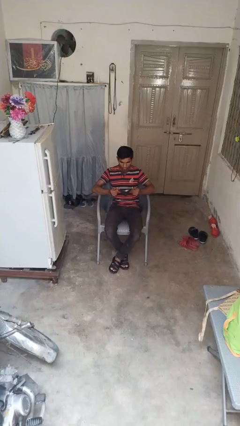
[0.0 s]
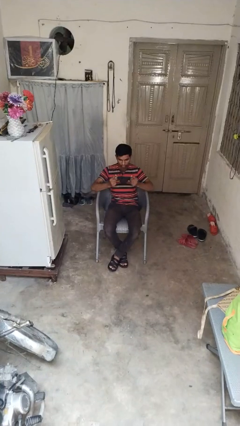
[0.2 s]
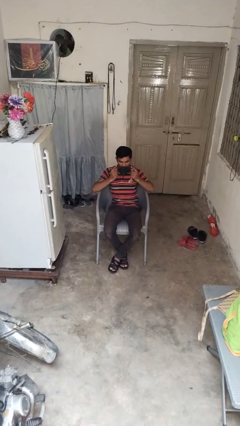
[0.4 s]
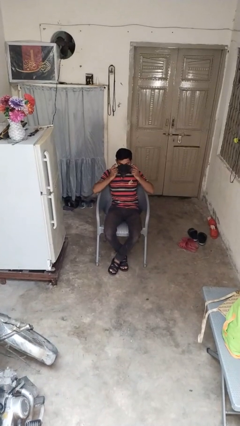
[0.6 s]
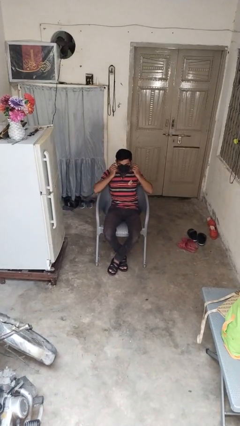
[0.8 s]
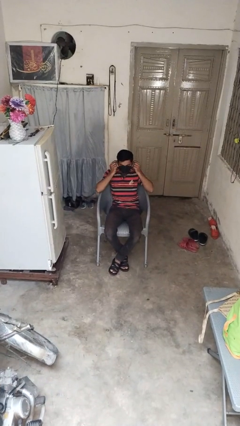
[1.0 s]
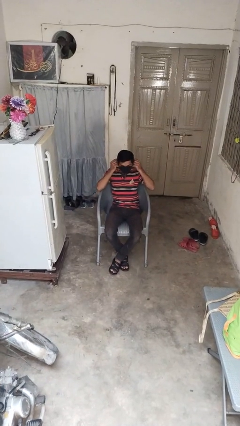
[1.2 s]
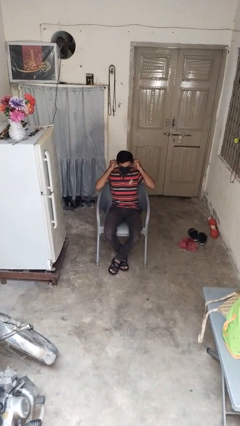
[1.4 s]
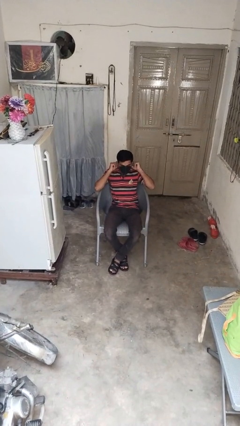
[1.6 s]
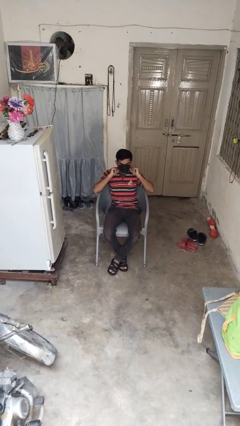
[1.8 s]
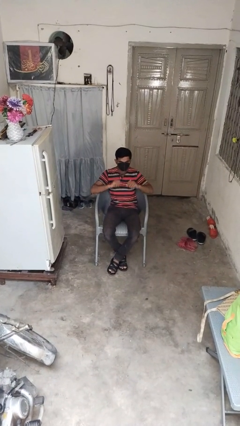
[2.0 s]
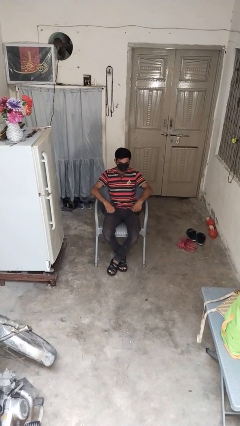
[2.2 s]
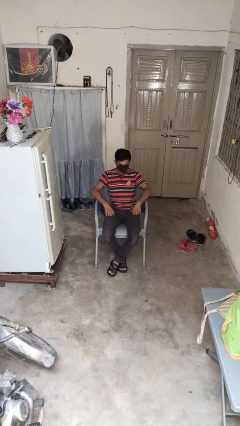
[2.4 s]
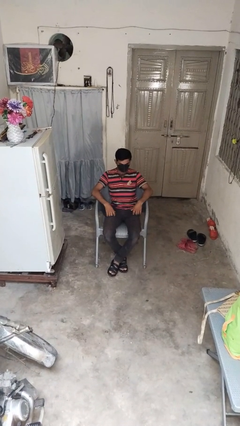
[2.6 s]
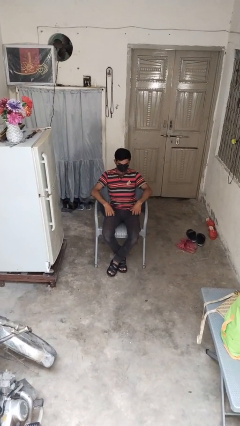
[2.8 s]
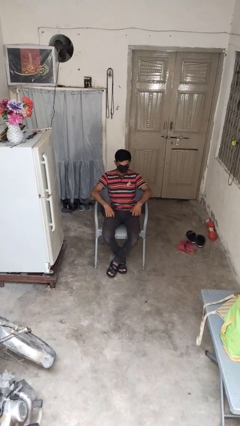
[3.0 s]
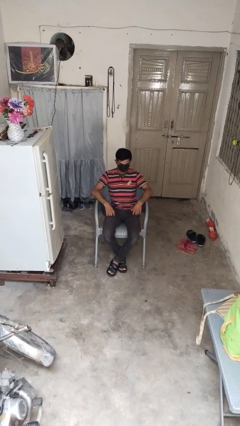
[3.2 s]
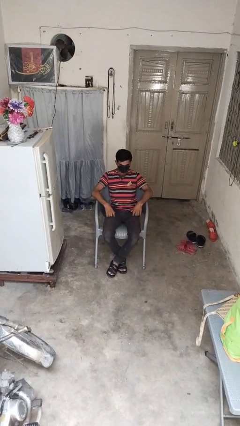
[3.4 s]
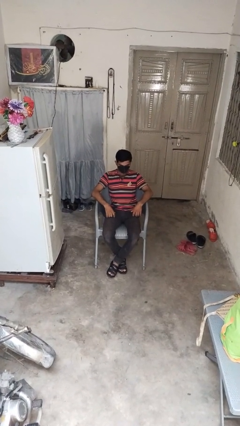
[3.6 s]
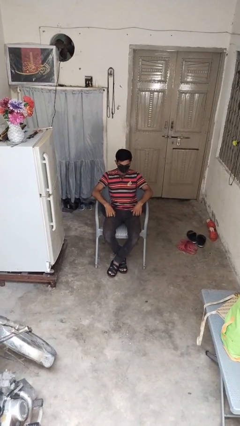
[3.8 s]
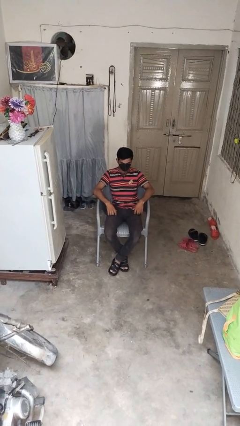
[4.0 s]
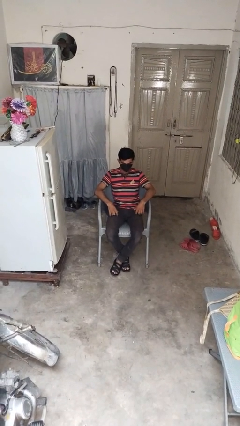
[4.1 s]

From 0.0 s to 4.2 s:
person puts on facemask

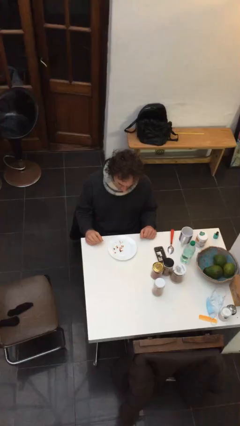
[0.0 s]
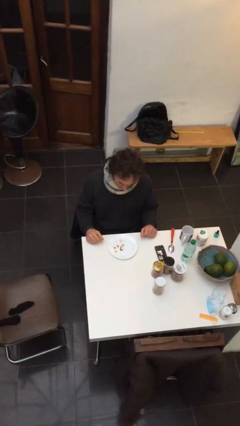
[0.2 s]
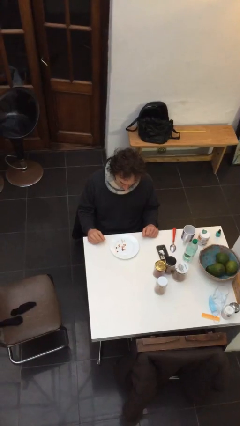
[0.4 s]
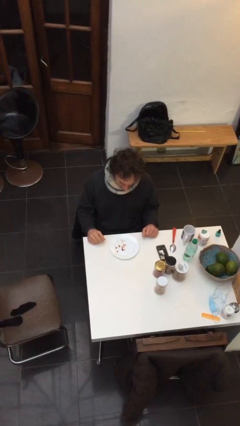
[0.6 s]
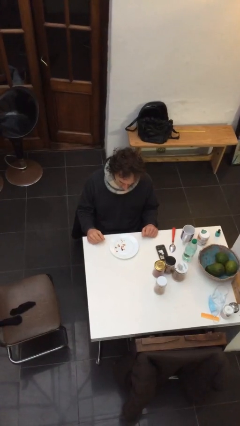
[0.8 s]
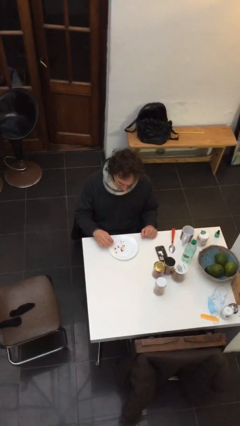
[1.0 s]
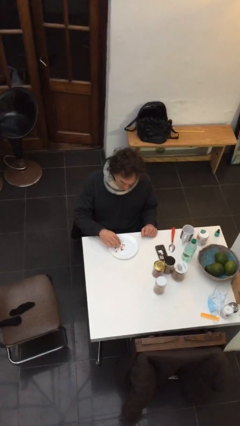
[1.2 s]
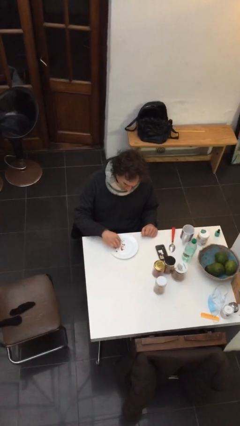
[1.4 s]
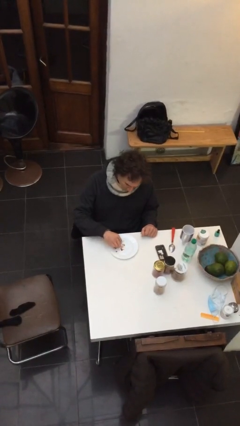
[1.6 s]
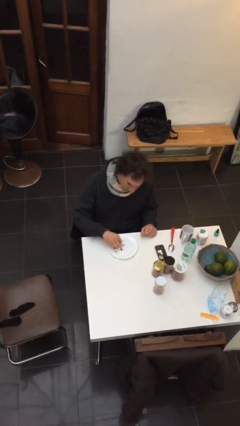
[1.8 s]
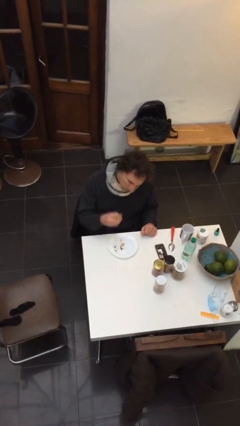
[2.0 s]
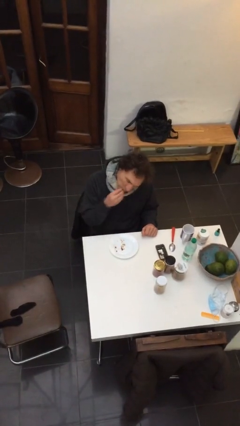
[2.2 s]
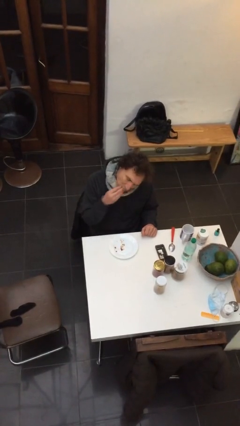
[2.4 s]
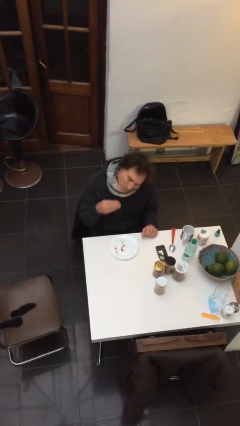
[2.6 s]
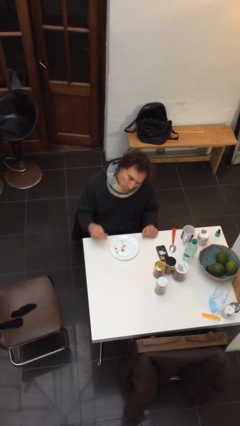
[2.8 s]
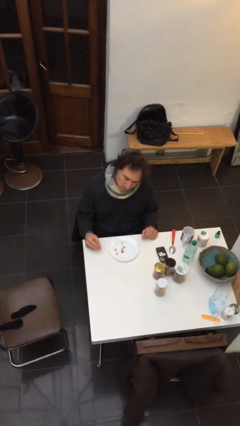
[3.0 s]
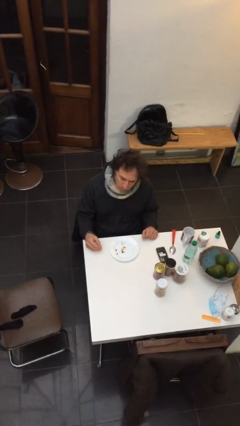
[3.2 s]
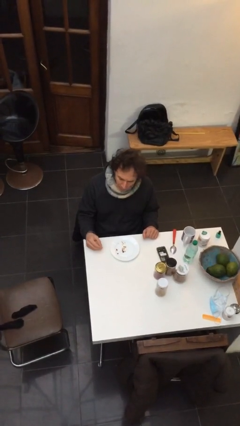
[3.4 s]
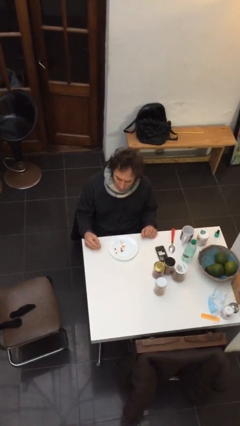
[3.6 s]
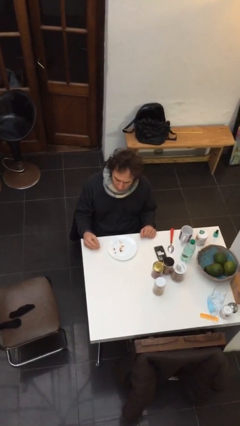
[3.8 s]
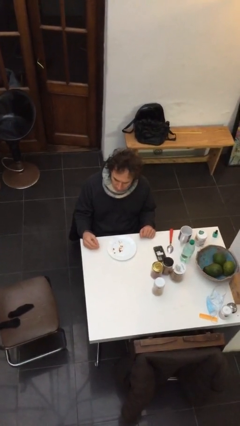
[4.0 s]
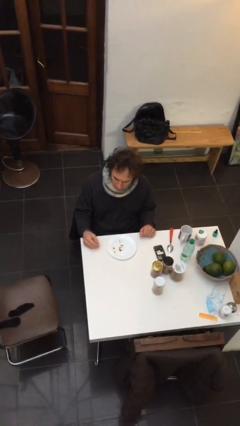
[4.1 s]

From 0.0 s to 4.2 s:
person eats with hands

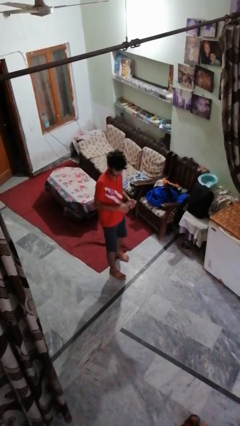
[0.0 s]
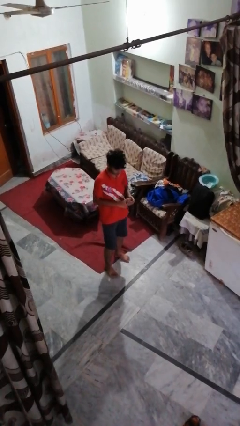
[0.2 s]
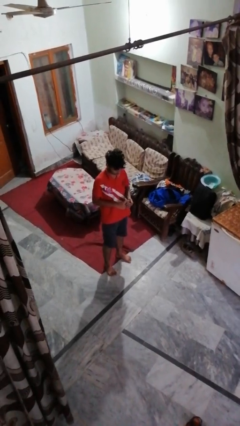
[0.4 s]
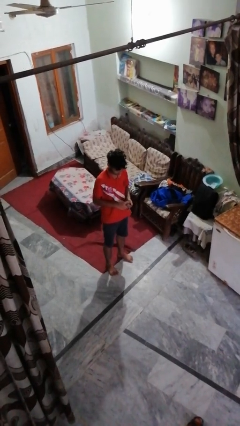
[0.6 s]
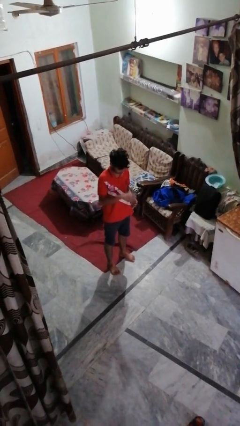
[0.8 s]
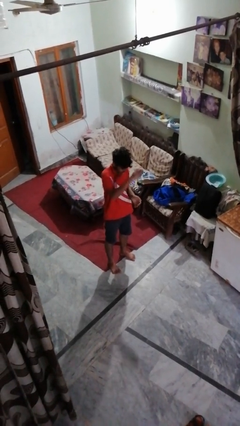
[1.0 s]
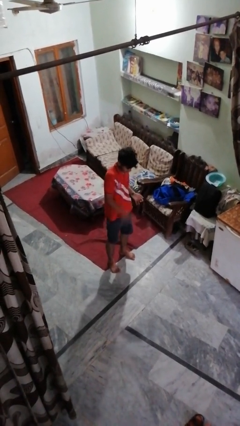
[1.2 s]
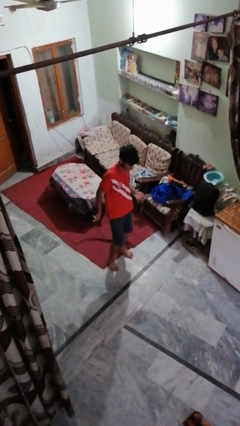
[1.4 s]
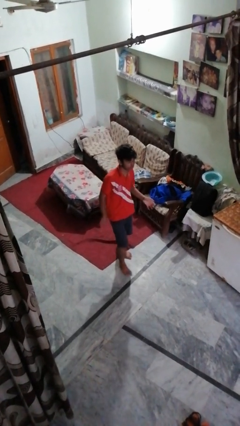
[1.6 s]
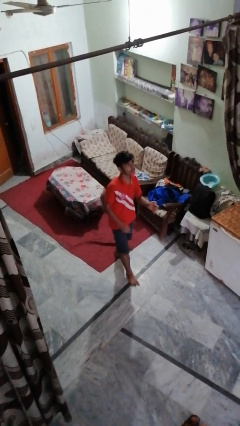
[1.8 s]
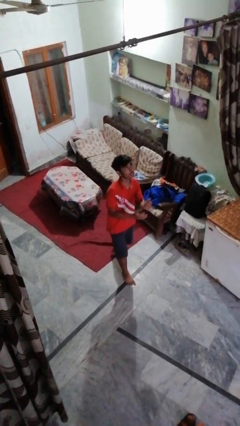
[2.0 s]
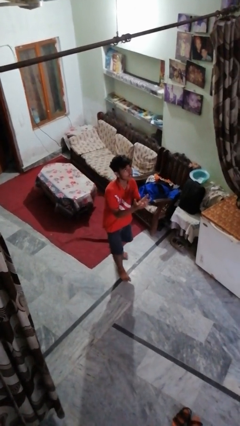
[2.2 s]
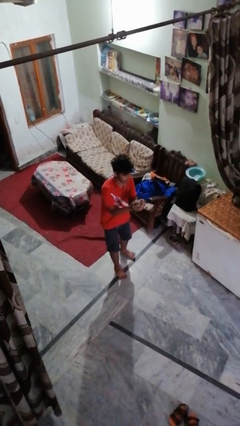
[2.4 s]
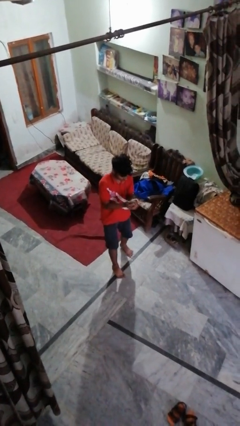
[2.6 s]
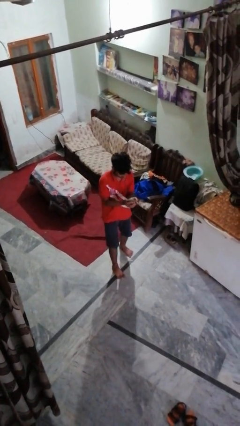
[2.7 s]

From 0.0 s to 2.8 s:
person bounces ball on floor

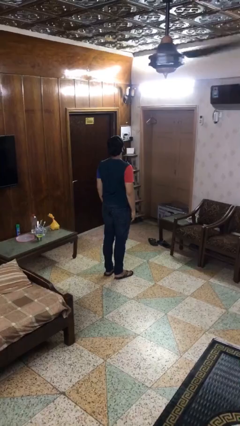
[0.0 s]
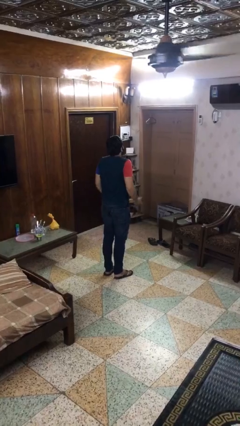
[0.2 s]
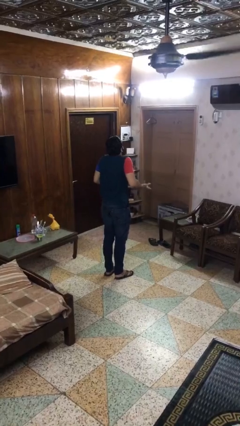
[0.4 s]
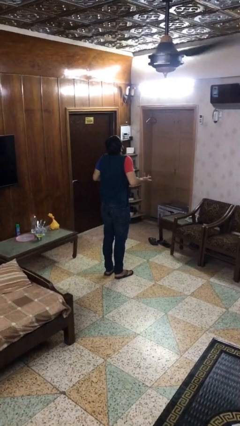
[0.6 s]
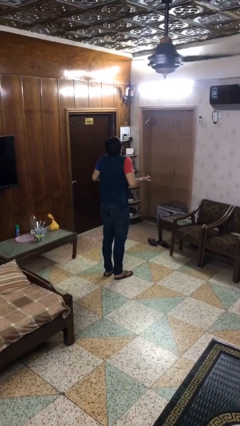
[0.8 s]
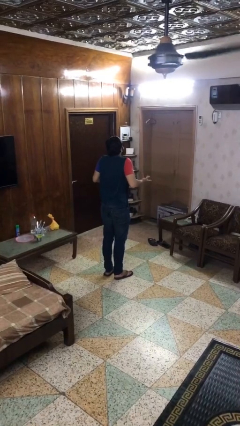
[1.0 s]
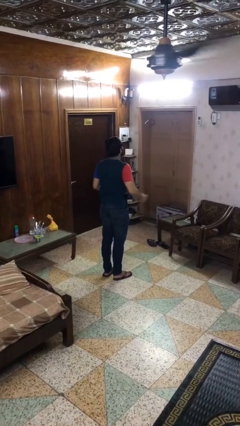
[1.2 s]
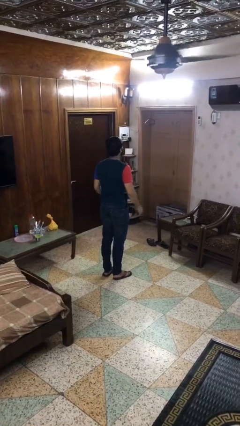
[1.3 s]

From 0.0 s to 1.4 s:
person shrugs

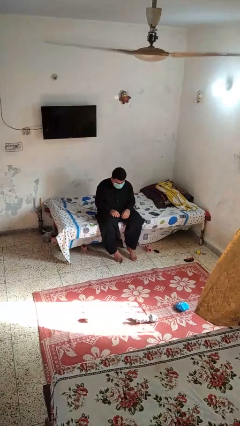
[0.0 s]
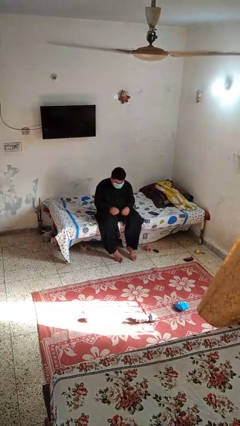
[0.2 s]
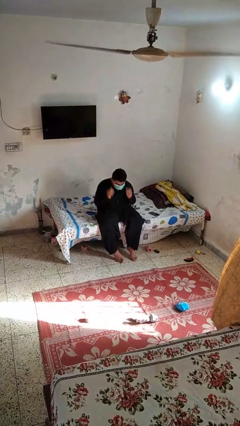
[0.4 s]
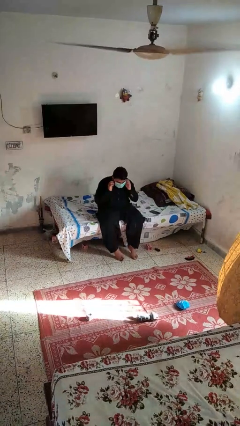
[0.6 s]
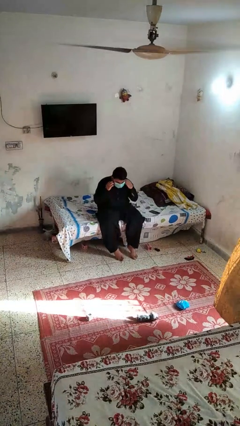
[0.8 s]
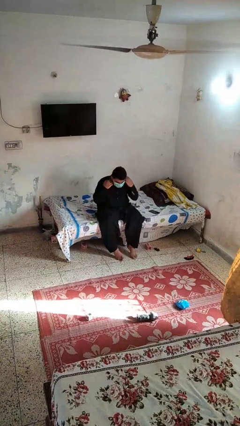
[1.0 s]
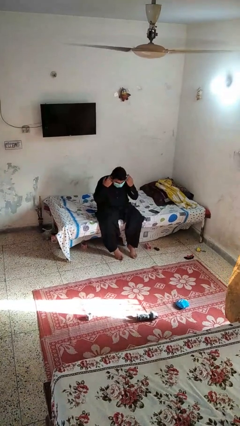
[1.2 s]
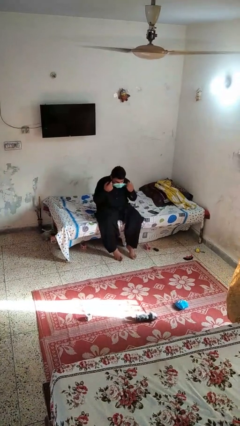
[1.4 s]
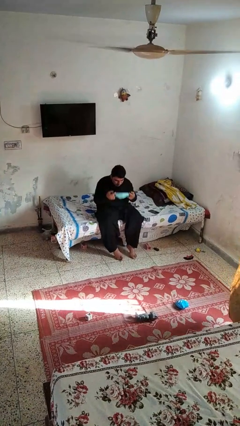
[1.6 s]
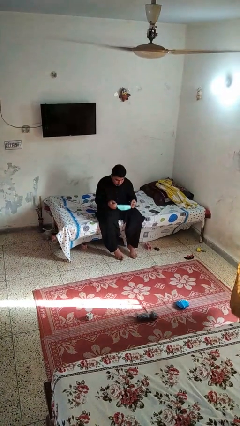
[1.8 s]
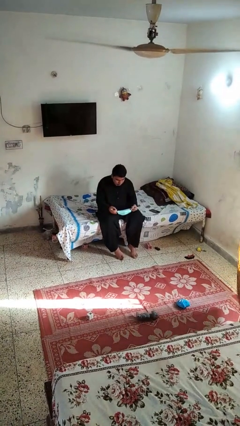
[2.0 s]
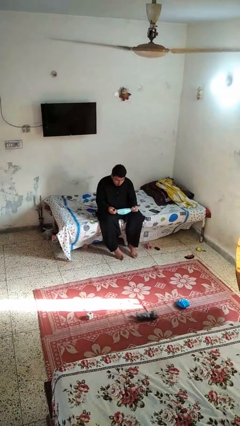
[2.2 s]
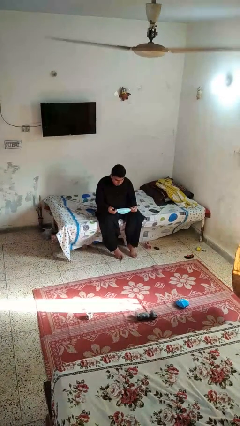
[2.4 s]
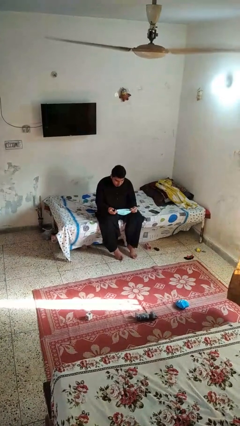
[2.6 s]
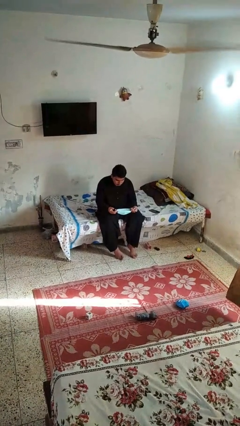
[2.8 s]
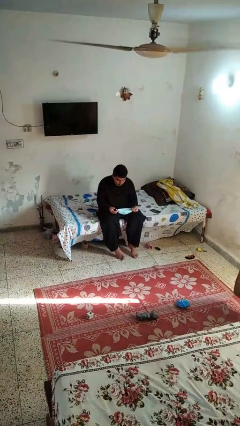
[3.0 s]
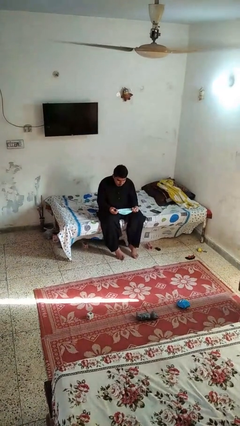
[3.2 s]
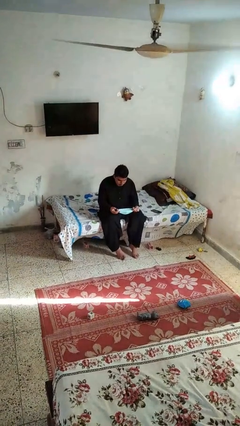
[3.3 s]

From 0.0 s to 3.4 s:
person takes off facemask

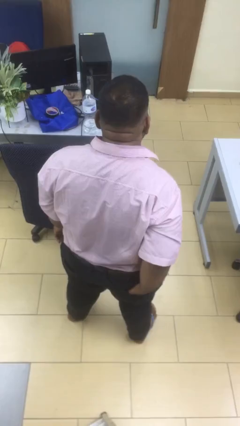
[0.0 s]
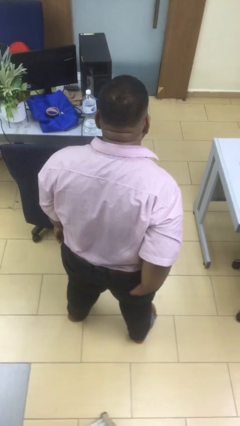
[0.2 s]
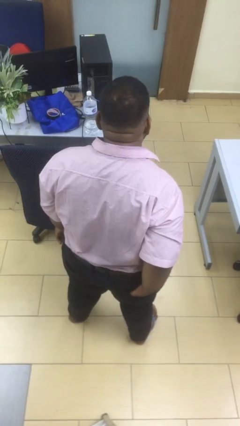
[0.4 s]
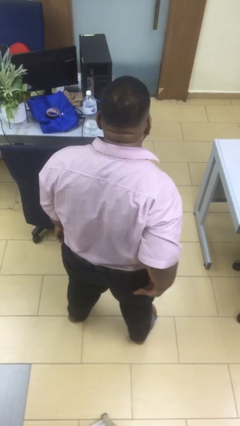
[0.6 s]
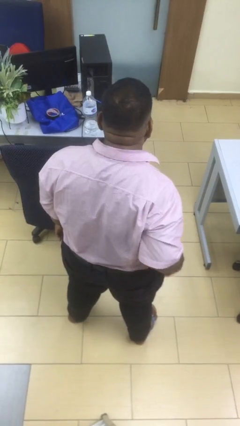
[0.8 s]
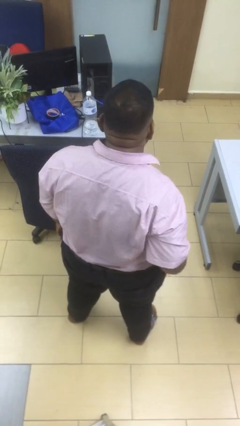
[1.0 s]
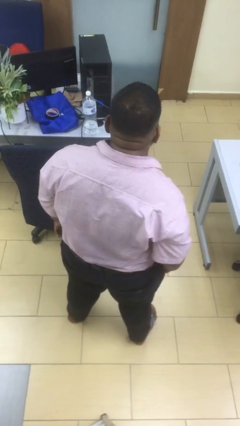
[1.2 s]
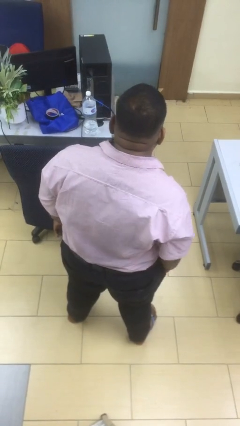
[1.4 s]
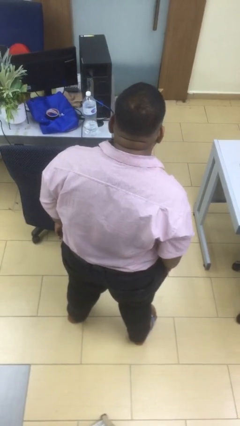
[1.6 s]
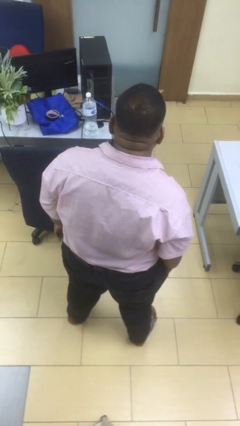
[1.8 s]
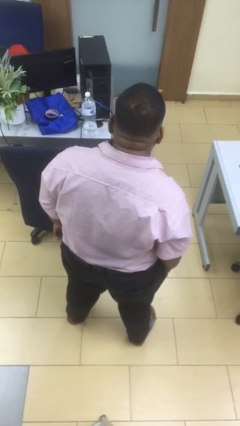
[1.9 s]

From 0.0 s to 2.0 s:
person puts hands in back pockets
